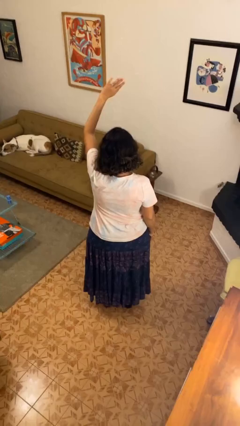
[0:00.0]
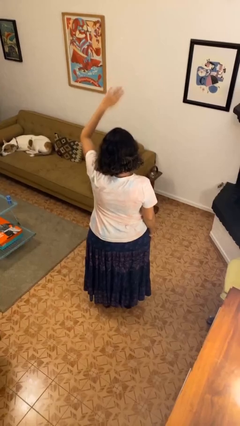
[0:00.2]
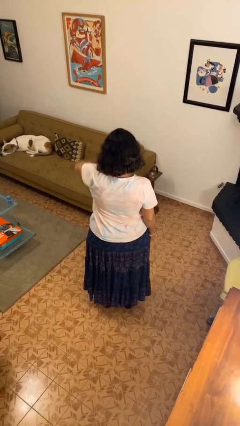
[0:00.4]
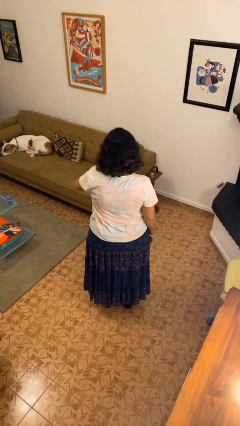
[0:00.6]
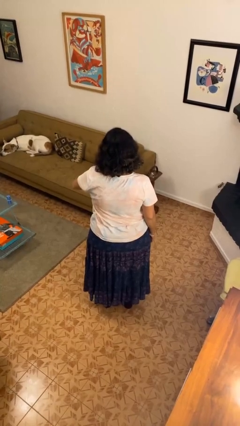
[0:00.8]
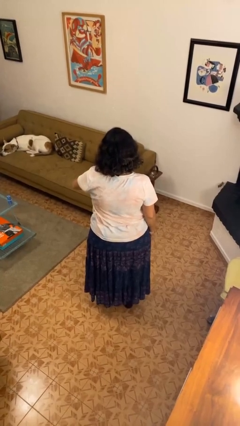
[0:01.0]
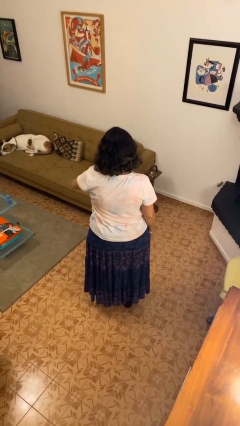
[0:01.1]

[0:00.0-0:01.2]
person gestures swipe down

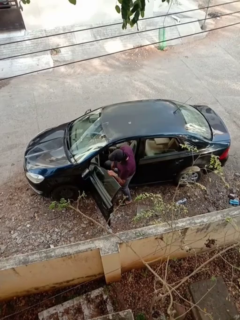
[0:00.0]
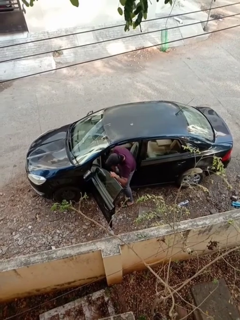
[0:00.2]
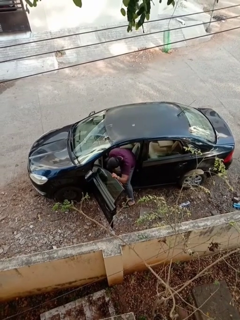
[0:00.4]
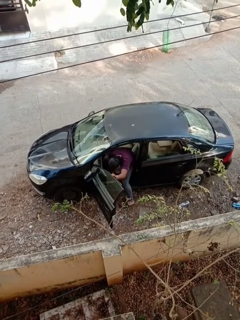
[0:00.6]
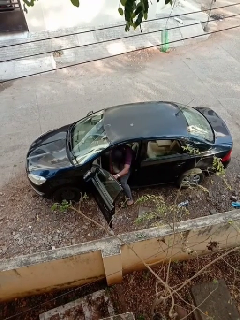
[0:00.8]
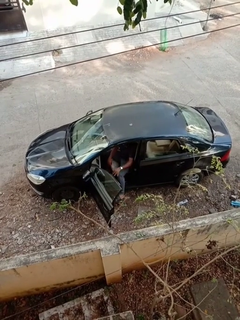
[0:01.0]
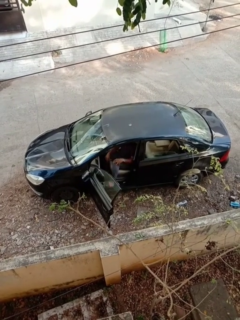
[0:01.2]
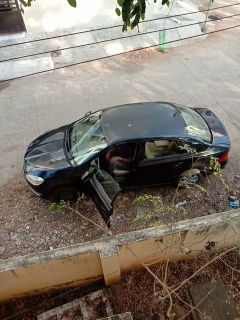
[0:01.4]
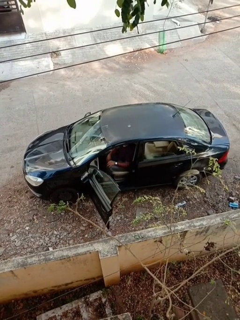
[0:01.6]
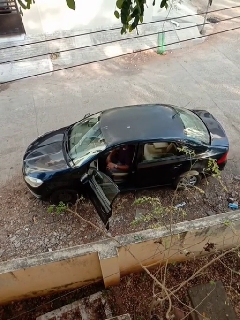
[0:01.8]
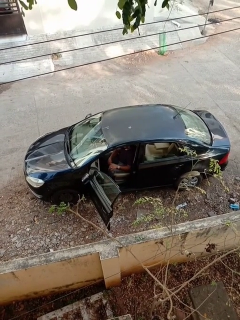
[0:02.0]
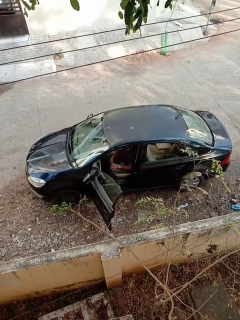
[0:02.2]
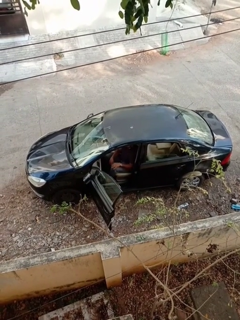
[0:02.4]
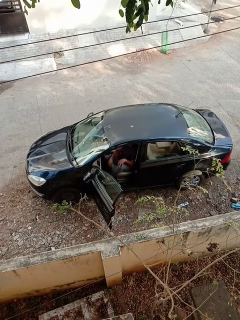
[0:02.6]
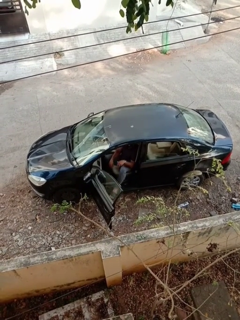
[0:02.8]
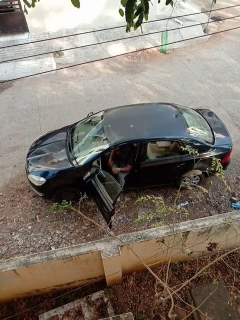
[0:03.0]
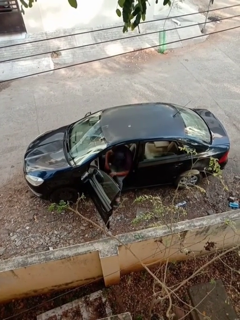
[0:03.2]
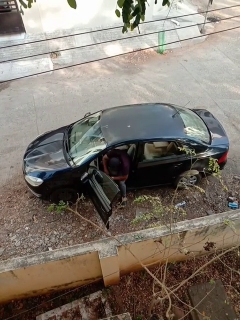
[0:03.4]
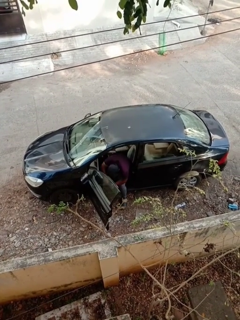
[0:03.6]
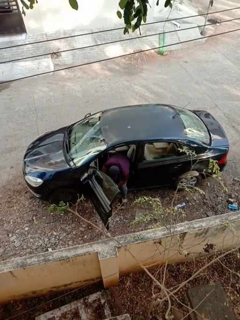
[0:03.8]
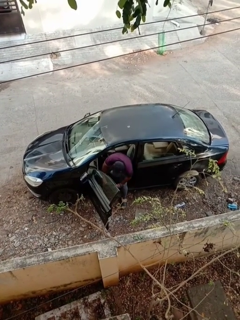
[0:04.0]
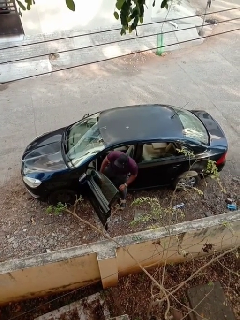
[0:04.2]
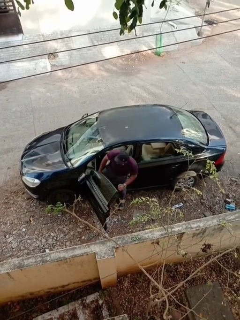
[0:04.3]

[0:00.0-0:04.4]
person enters car

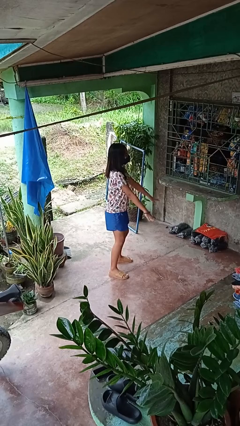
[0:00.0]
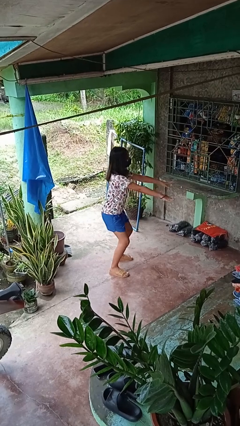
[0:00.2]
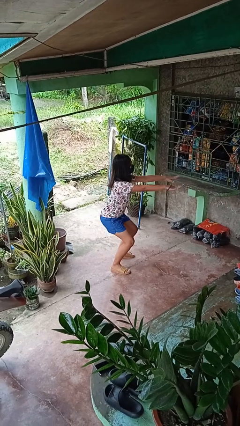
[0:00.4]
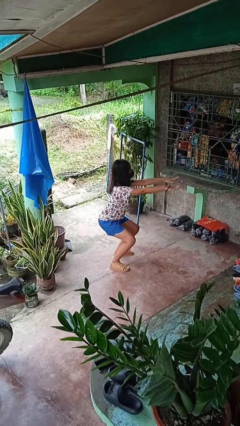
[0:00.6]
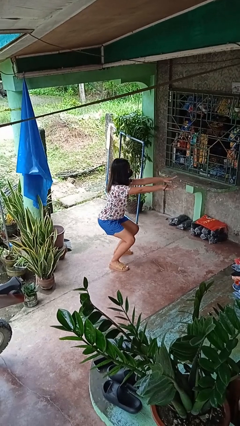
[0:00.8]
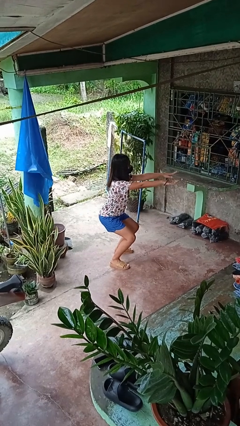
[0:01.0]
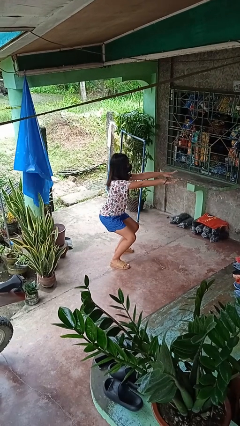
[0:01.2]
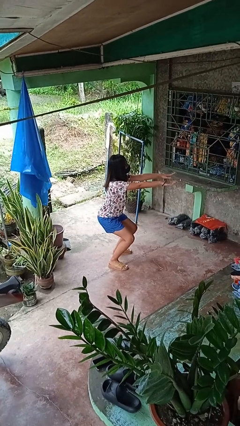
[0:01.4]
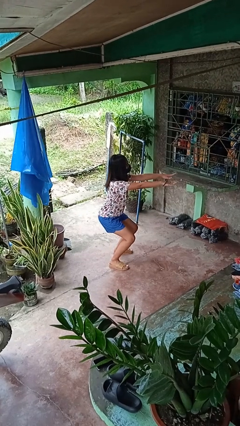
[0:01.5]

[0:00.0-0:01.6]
person squats

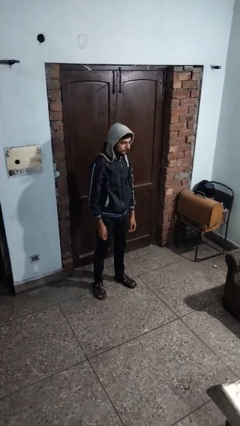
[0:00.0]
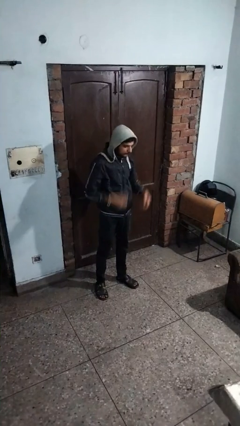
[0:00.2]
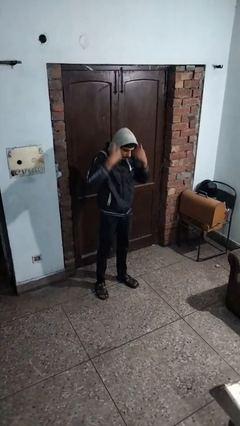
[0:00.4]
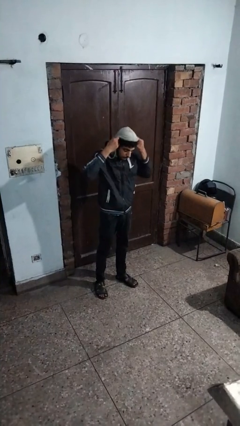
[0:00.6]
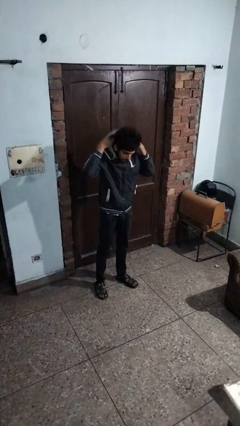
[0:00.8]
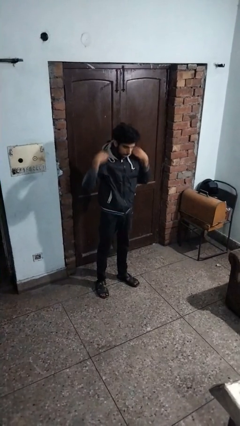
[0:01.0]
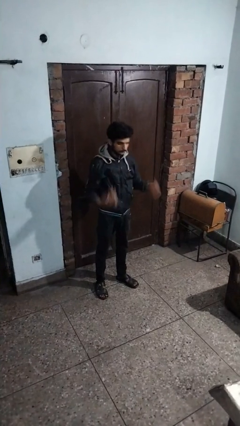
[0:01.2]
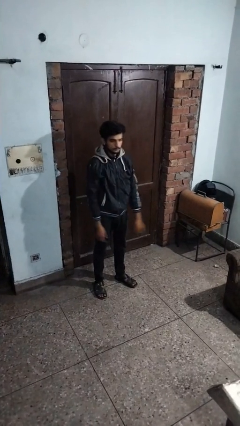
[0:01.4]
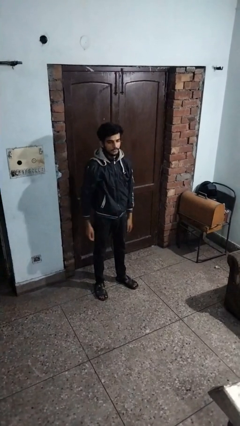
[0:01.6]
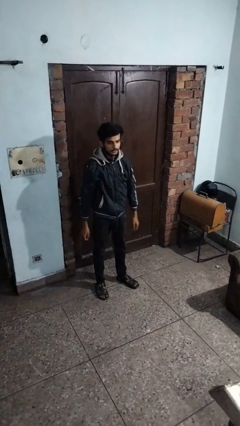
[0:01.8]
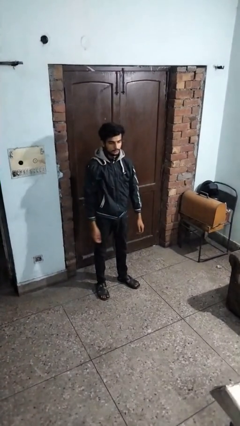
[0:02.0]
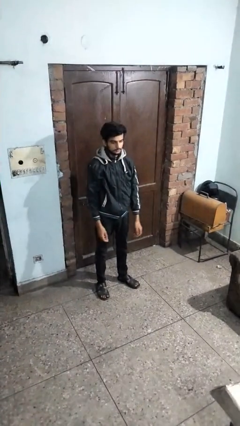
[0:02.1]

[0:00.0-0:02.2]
person takes off hoodie

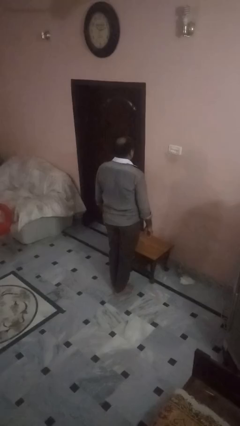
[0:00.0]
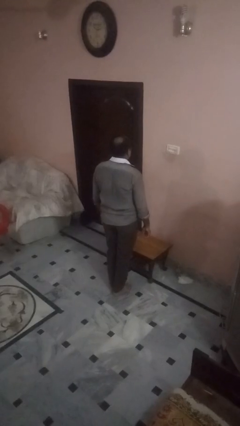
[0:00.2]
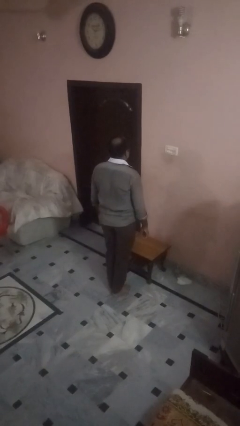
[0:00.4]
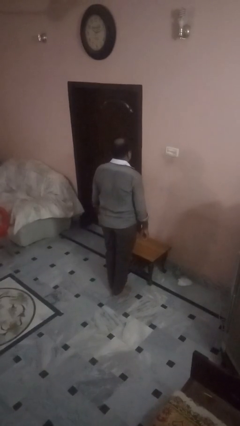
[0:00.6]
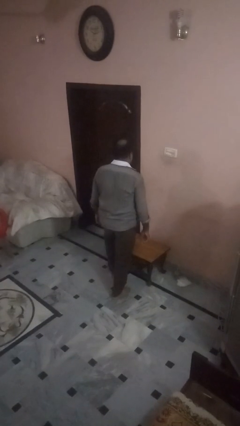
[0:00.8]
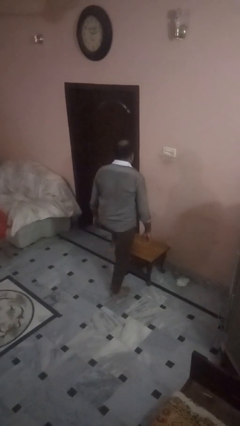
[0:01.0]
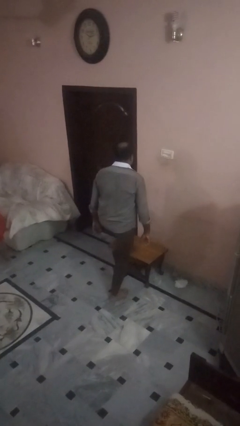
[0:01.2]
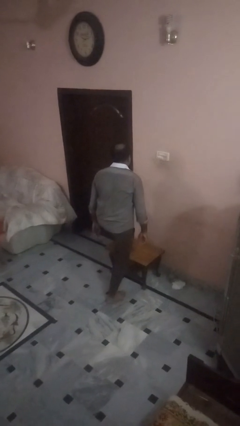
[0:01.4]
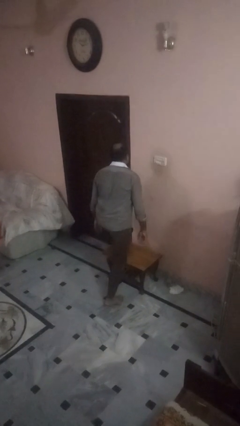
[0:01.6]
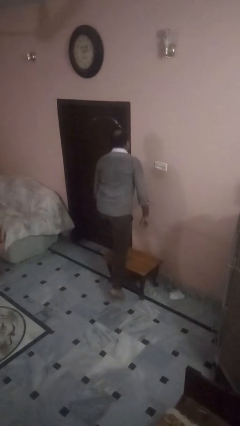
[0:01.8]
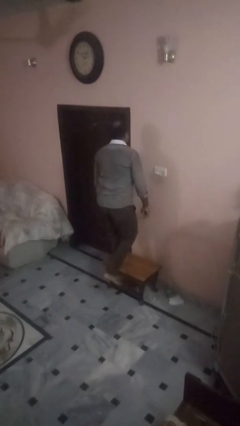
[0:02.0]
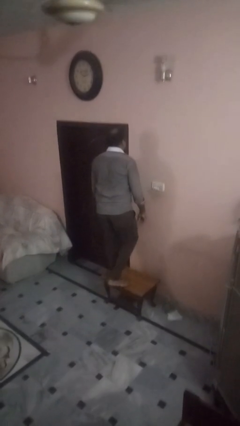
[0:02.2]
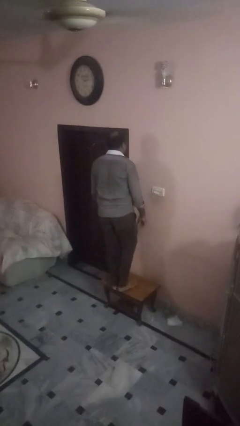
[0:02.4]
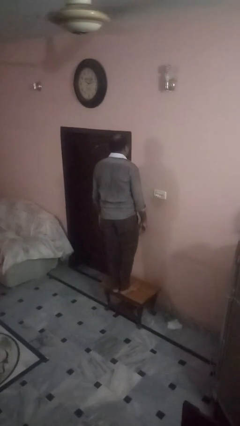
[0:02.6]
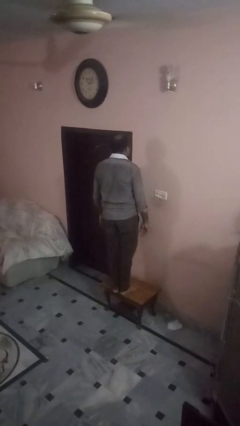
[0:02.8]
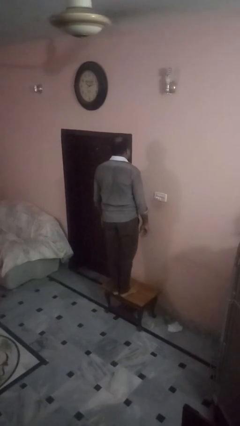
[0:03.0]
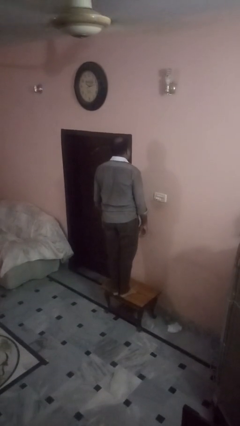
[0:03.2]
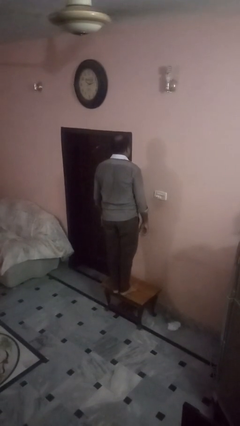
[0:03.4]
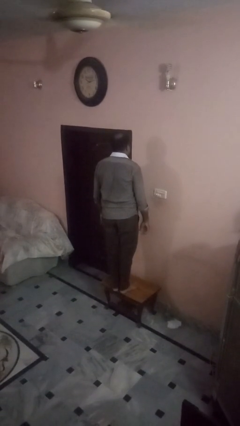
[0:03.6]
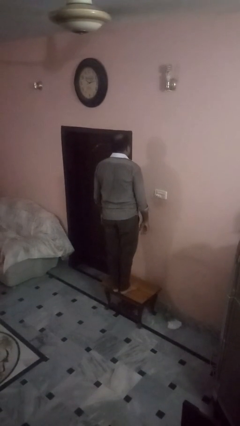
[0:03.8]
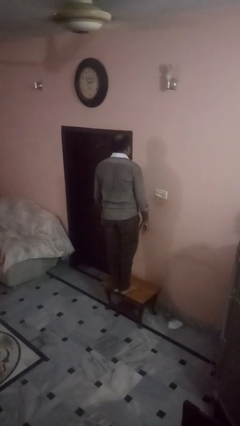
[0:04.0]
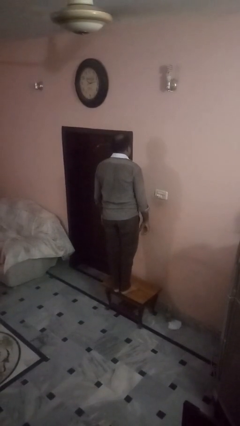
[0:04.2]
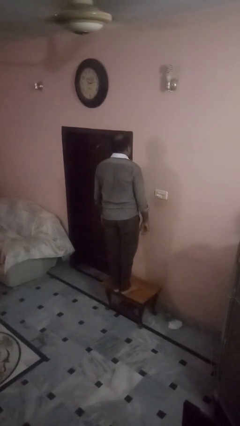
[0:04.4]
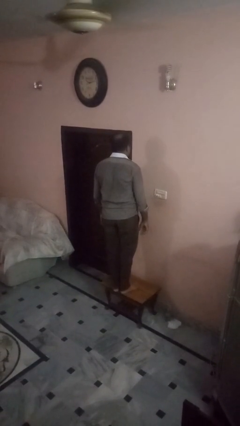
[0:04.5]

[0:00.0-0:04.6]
person climbs on table

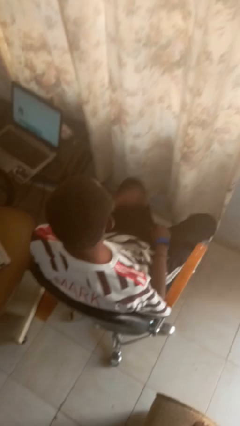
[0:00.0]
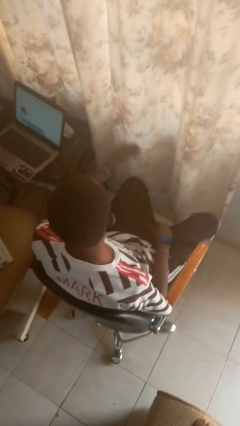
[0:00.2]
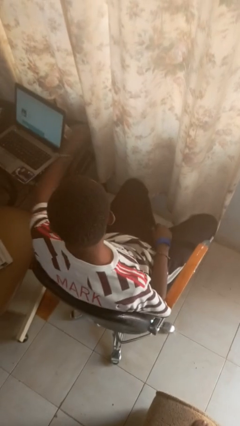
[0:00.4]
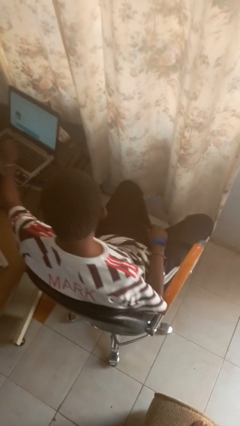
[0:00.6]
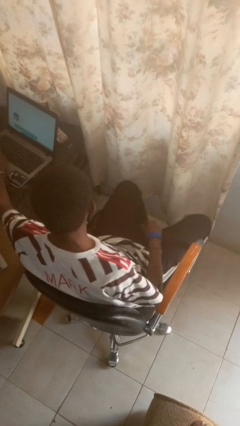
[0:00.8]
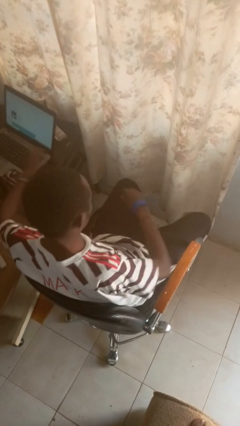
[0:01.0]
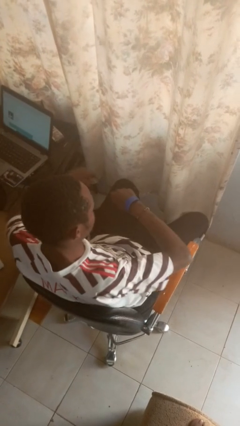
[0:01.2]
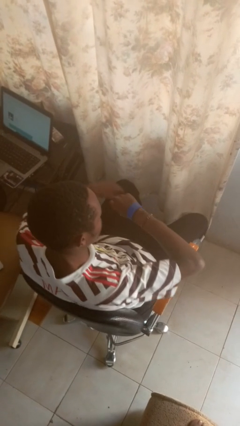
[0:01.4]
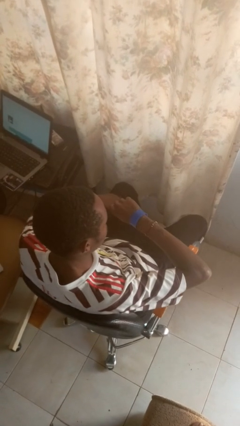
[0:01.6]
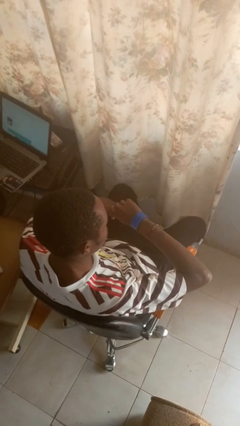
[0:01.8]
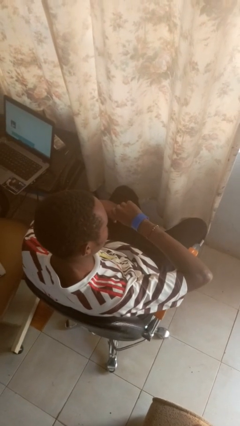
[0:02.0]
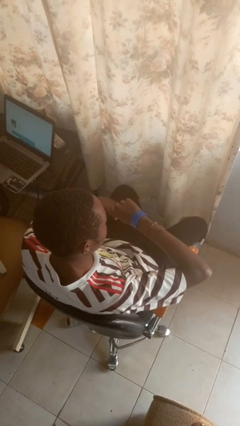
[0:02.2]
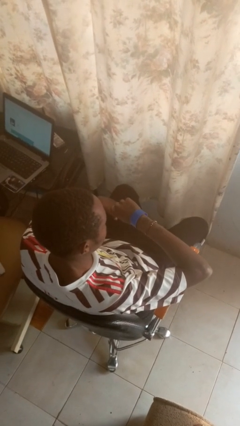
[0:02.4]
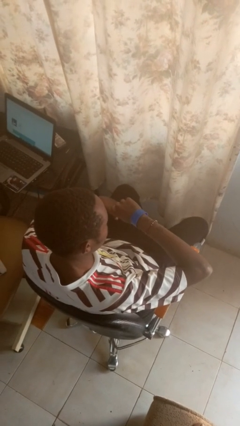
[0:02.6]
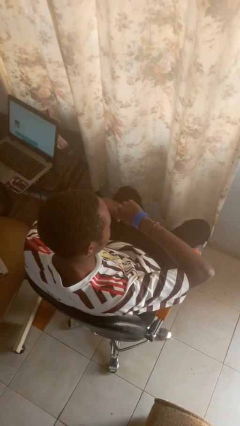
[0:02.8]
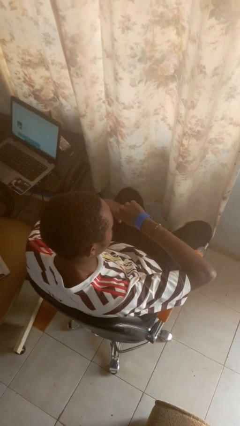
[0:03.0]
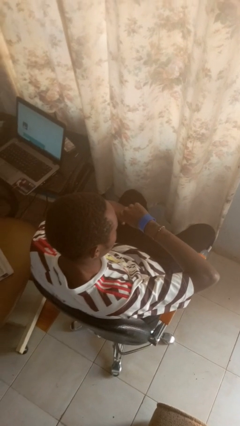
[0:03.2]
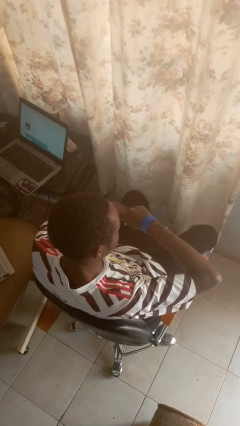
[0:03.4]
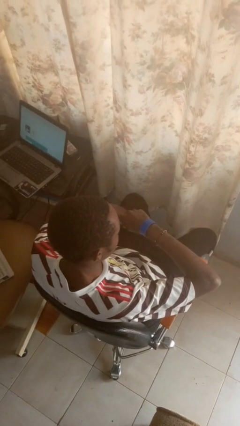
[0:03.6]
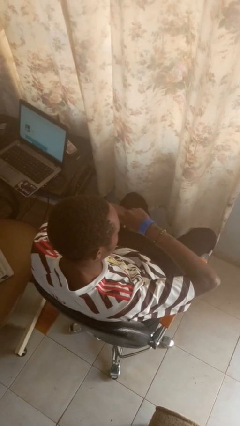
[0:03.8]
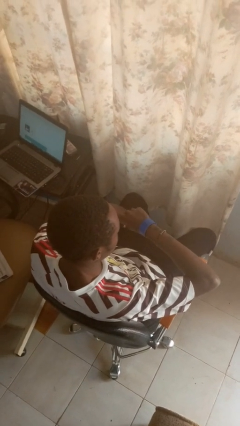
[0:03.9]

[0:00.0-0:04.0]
person looks at wristwatch

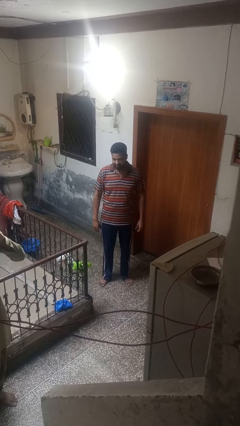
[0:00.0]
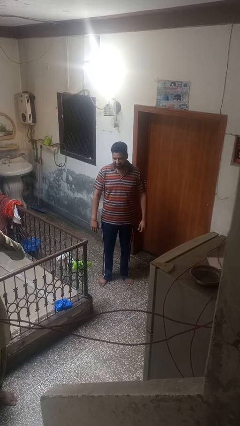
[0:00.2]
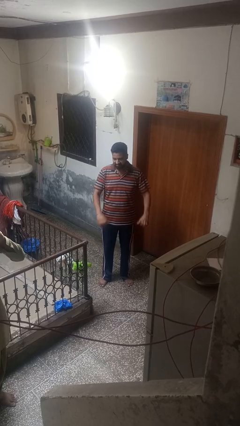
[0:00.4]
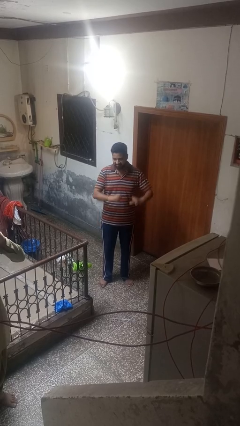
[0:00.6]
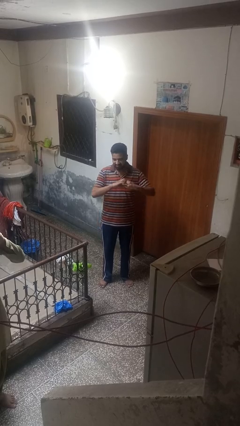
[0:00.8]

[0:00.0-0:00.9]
person gestures heart
